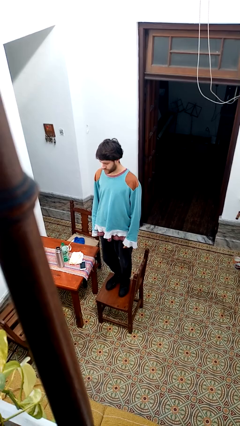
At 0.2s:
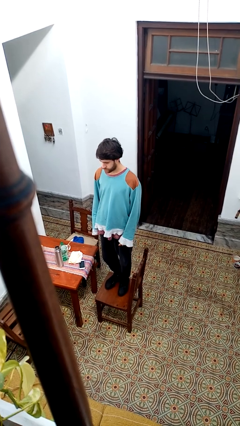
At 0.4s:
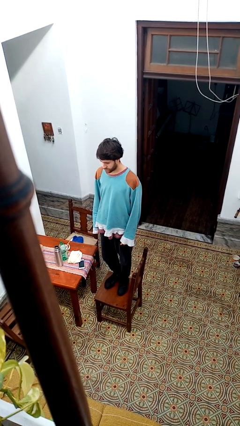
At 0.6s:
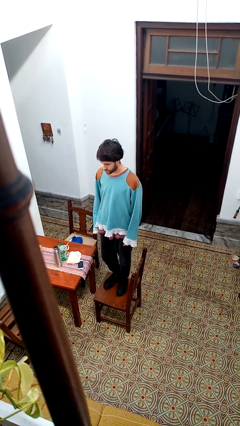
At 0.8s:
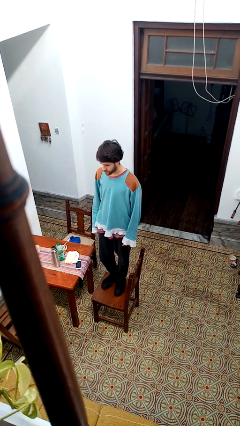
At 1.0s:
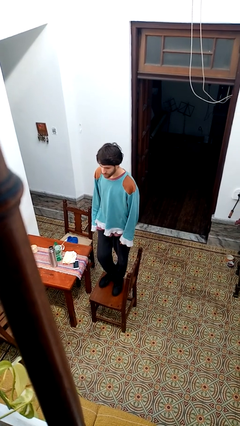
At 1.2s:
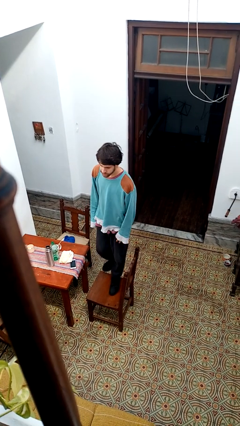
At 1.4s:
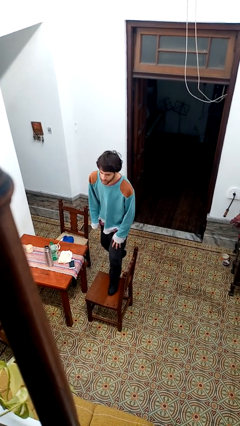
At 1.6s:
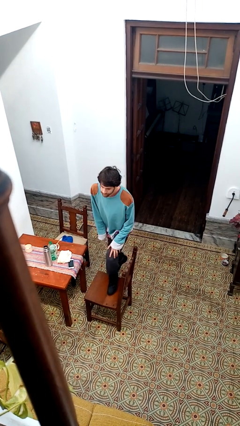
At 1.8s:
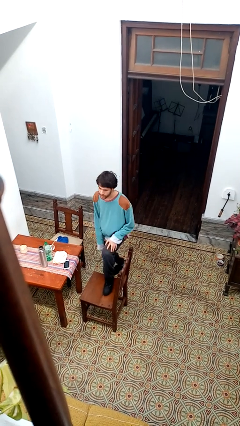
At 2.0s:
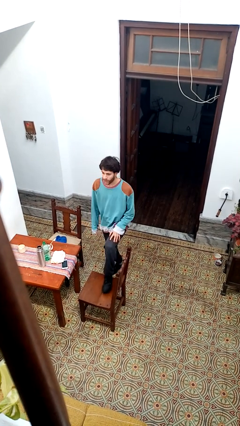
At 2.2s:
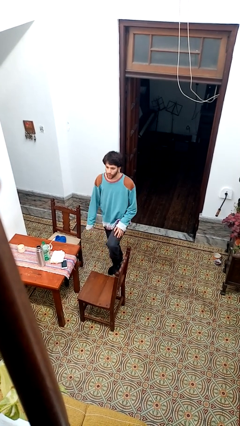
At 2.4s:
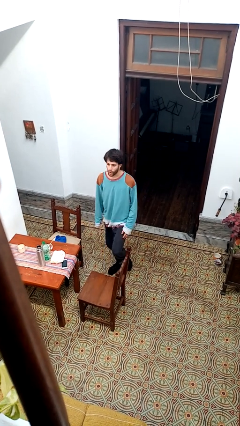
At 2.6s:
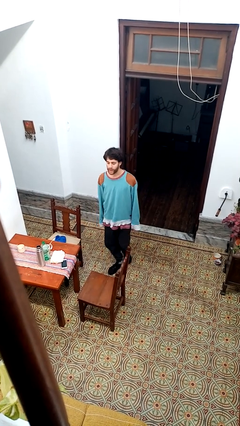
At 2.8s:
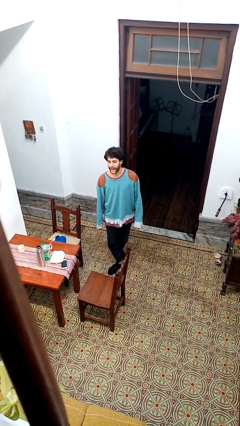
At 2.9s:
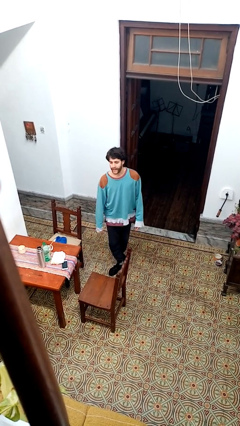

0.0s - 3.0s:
person climbs off chair

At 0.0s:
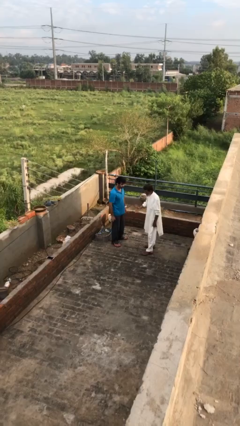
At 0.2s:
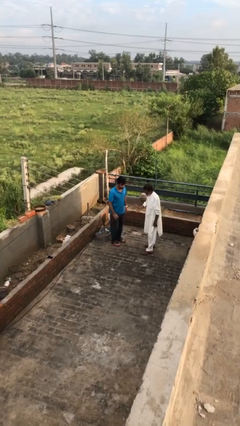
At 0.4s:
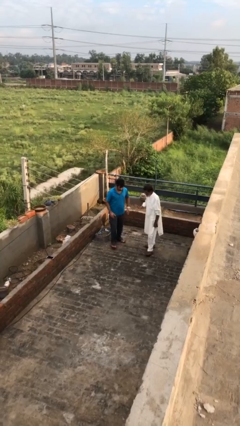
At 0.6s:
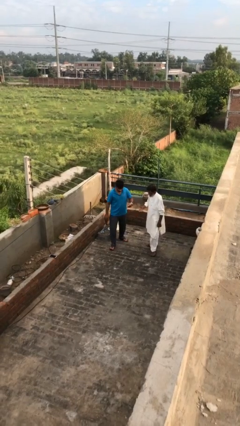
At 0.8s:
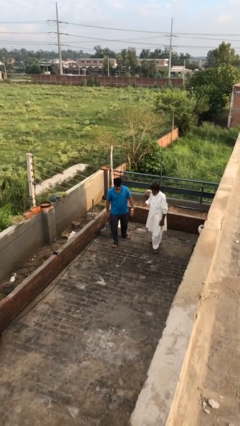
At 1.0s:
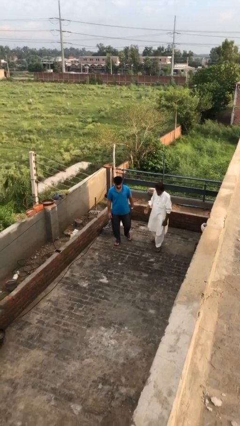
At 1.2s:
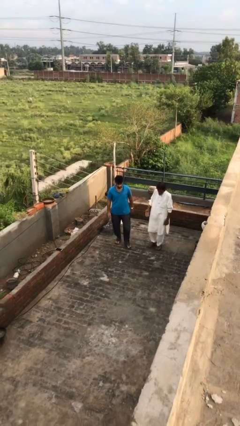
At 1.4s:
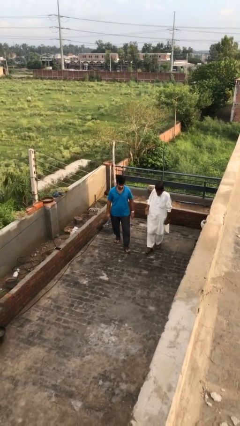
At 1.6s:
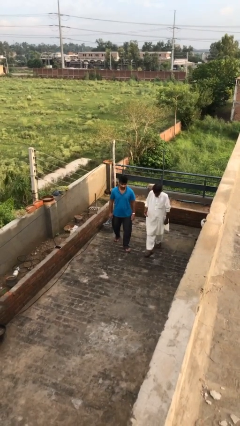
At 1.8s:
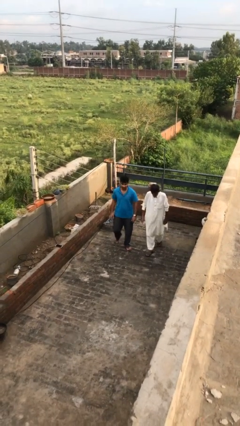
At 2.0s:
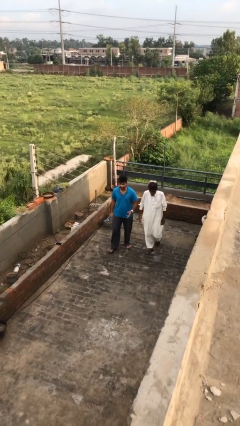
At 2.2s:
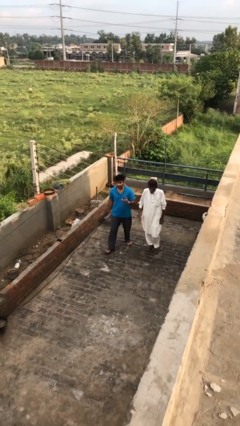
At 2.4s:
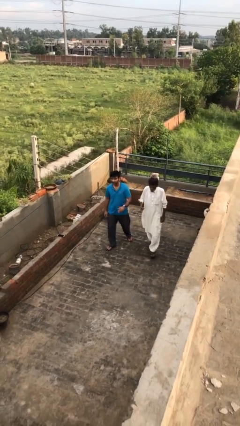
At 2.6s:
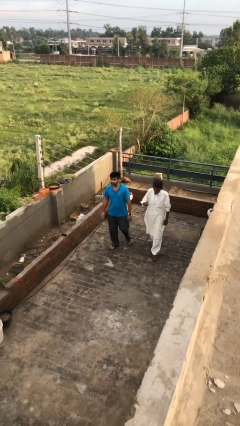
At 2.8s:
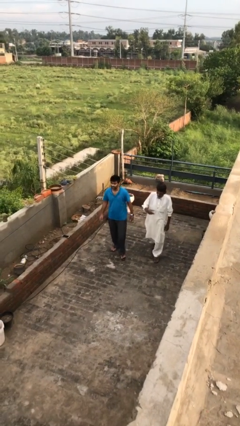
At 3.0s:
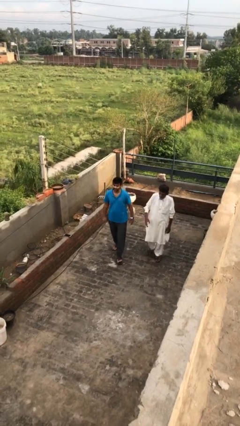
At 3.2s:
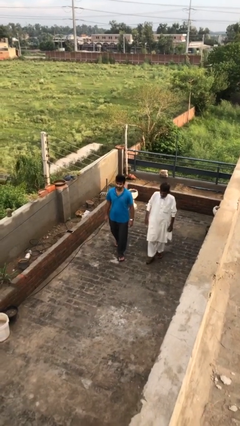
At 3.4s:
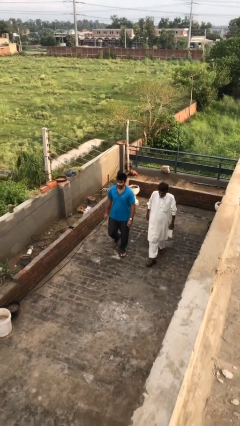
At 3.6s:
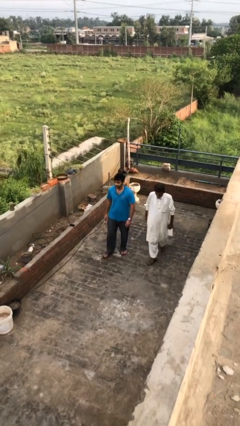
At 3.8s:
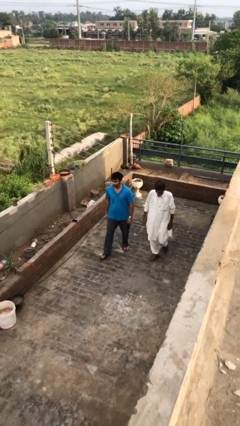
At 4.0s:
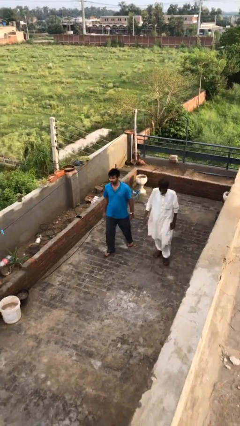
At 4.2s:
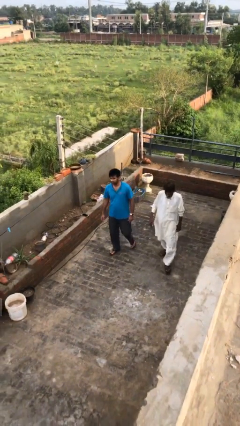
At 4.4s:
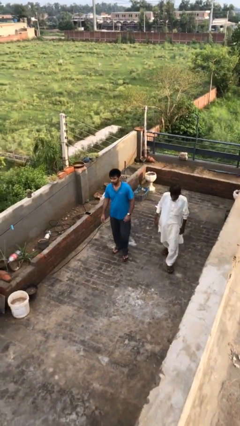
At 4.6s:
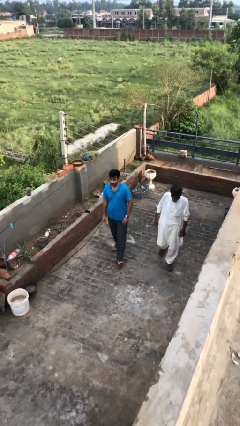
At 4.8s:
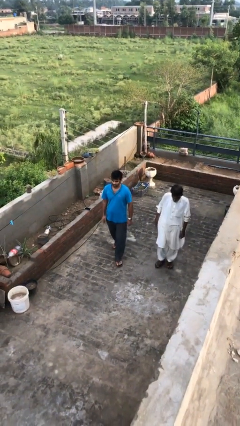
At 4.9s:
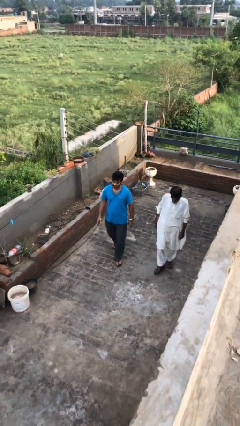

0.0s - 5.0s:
person talks to person

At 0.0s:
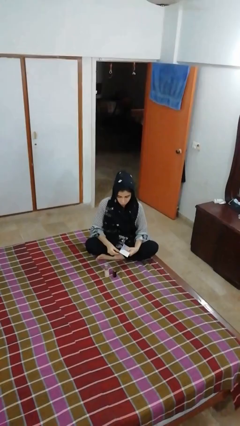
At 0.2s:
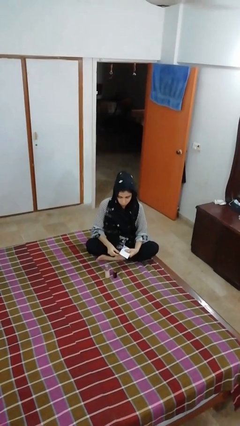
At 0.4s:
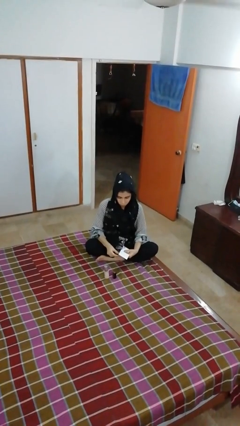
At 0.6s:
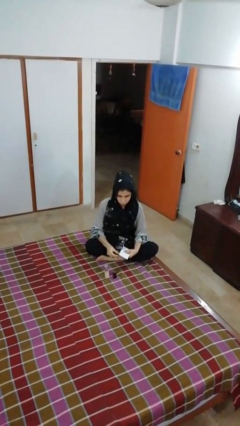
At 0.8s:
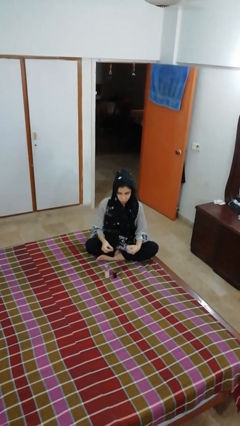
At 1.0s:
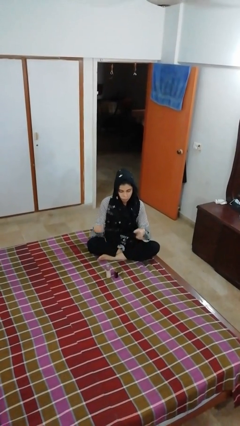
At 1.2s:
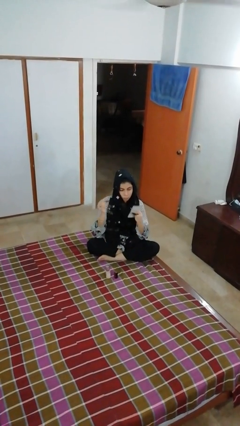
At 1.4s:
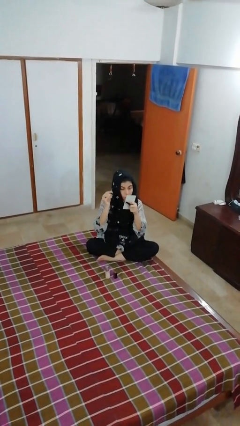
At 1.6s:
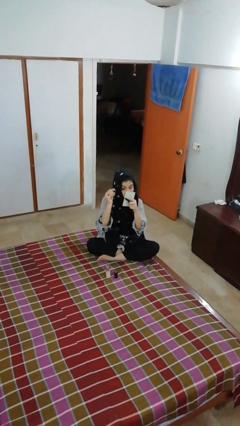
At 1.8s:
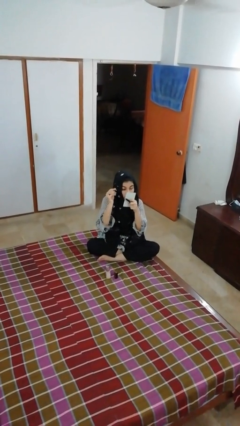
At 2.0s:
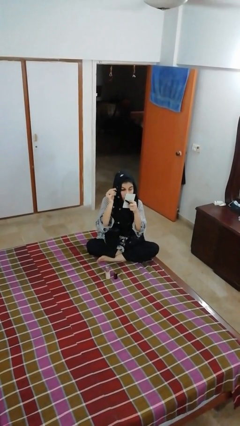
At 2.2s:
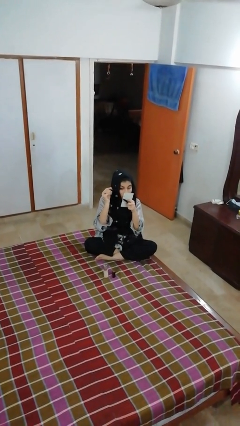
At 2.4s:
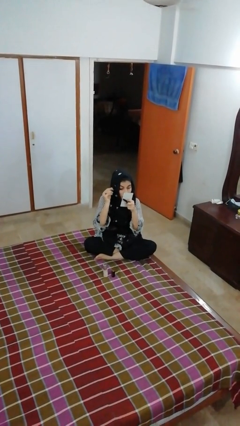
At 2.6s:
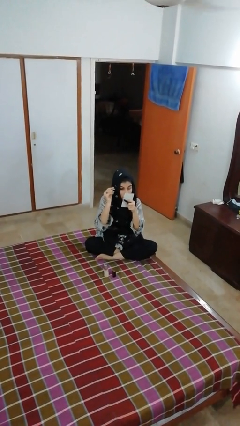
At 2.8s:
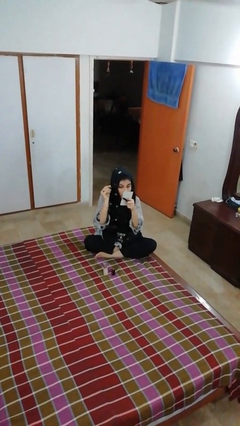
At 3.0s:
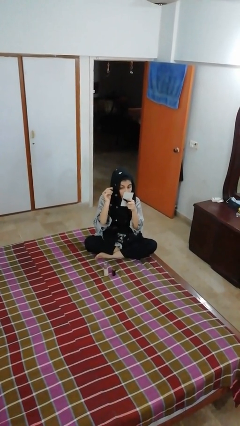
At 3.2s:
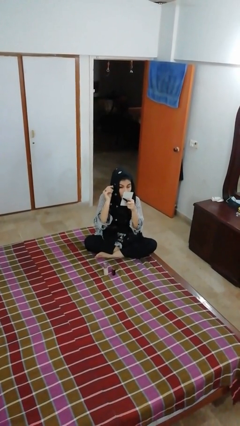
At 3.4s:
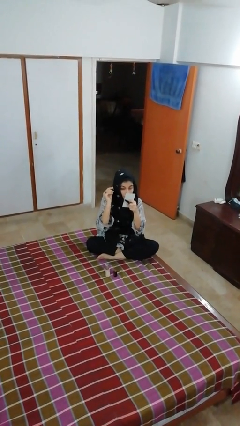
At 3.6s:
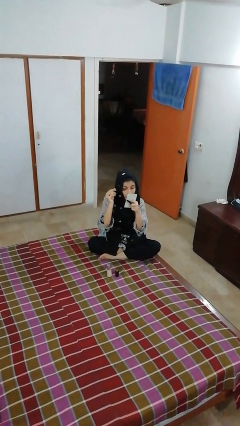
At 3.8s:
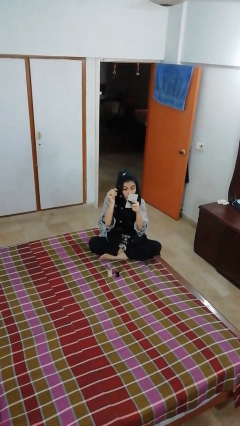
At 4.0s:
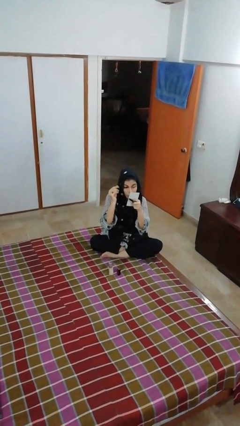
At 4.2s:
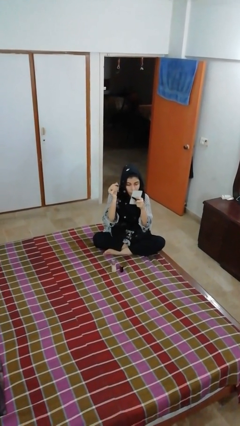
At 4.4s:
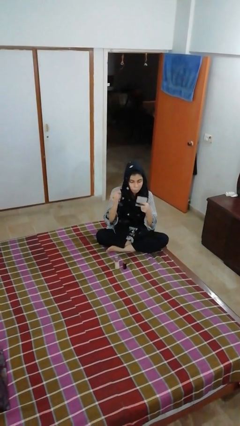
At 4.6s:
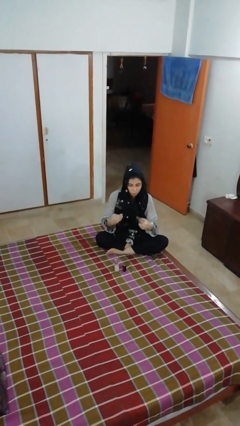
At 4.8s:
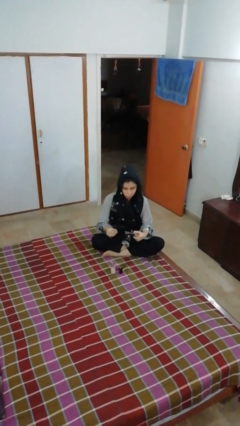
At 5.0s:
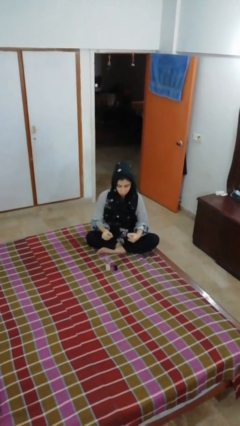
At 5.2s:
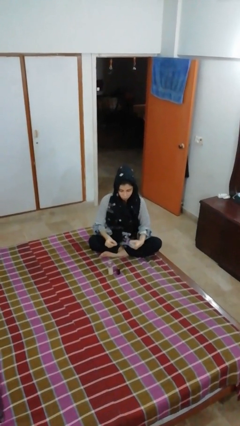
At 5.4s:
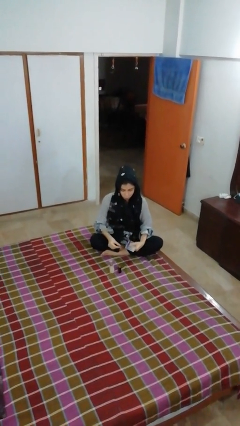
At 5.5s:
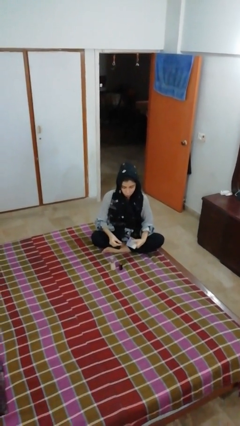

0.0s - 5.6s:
person applies eye makeup

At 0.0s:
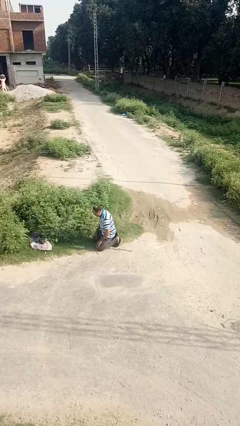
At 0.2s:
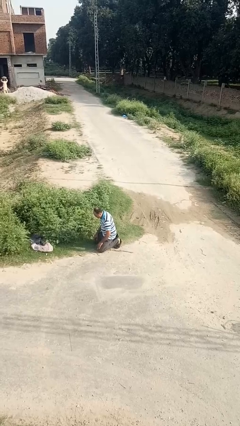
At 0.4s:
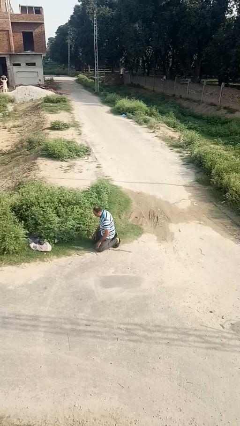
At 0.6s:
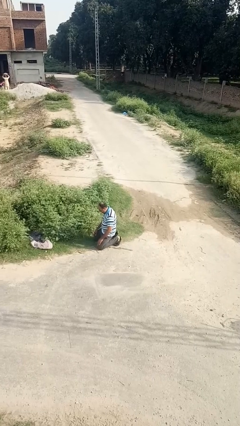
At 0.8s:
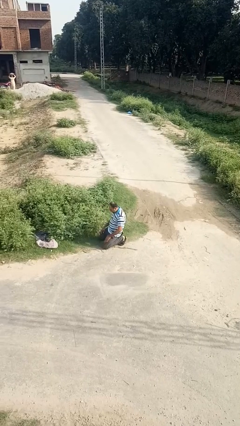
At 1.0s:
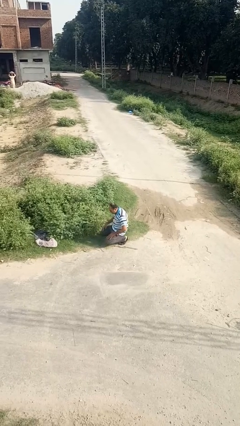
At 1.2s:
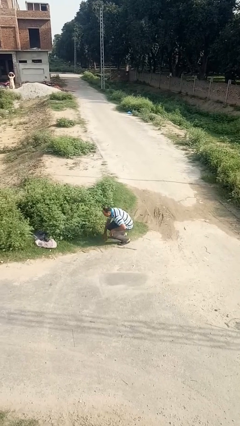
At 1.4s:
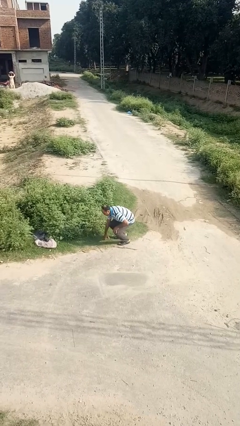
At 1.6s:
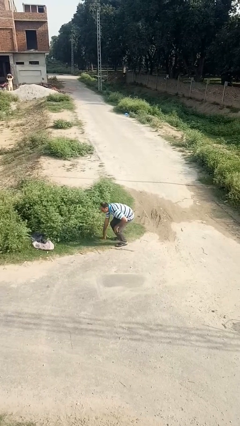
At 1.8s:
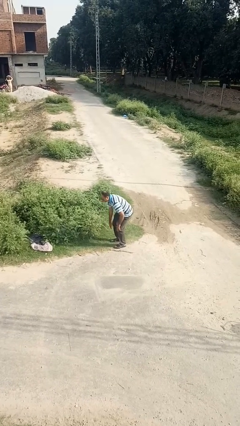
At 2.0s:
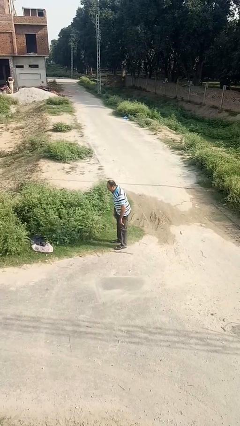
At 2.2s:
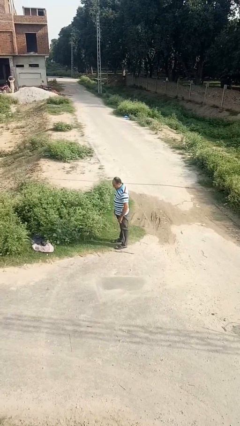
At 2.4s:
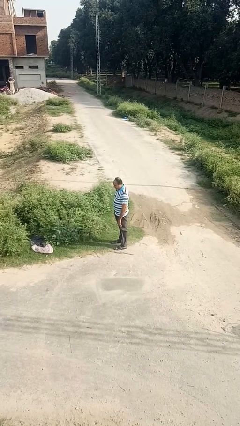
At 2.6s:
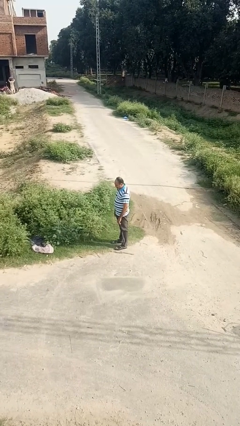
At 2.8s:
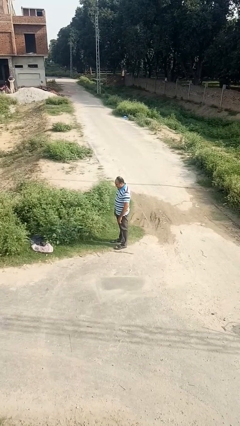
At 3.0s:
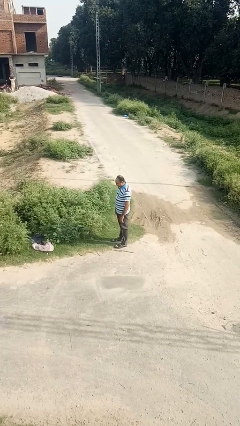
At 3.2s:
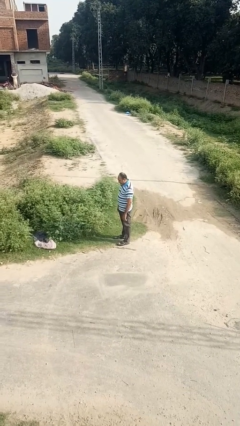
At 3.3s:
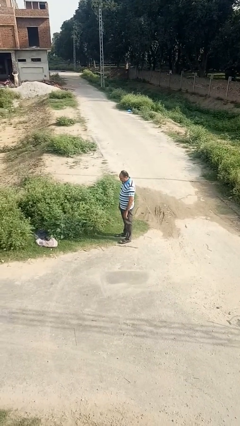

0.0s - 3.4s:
person stands up from floor

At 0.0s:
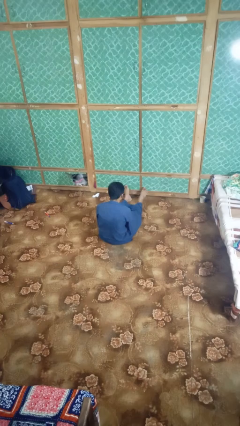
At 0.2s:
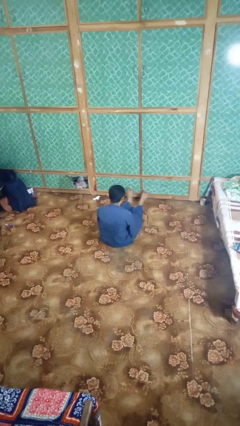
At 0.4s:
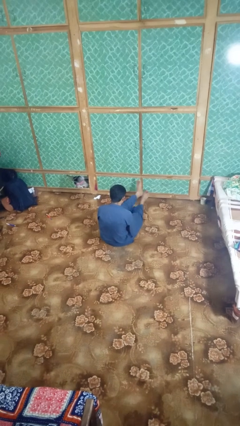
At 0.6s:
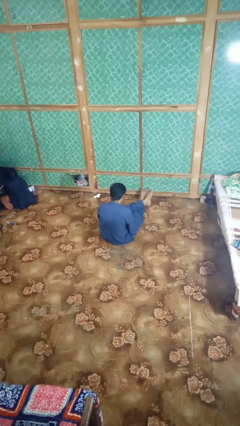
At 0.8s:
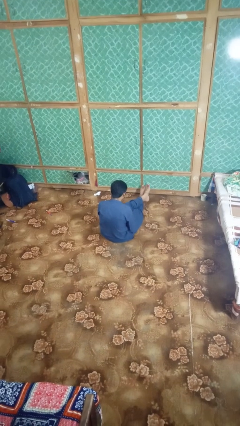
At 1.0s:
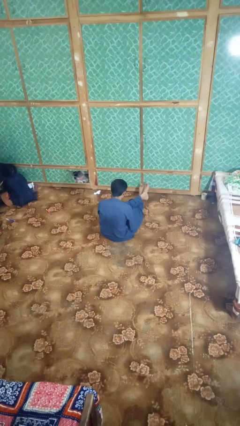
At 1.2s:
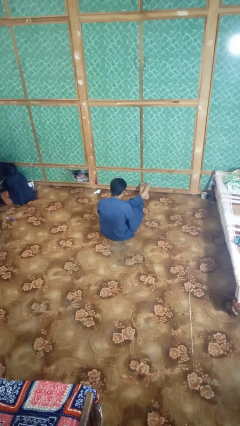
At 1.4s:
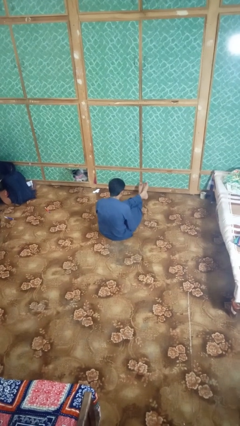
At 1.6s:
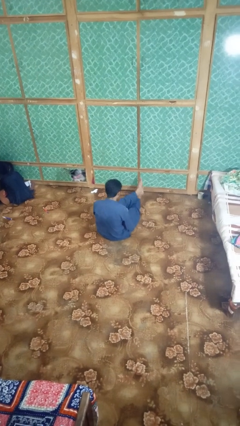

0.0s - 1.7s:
person crosses legs
